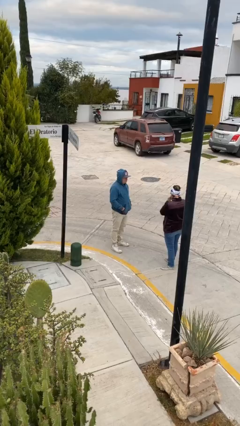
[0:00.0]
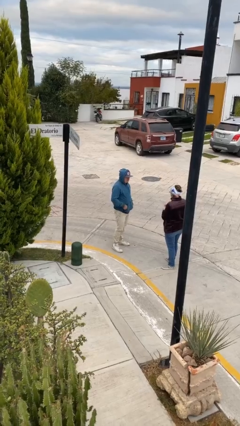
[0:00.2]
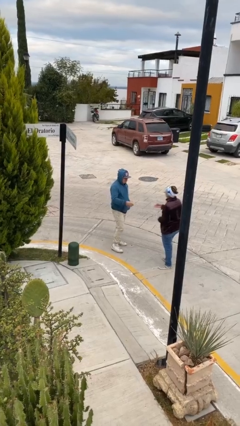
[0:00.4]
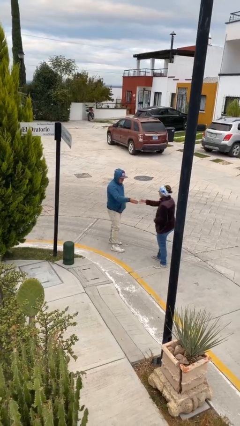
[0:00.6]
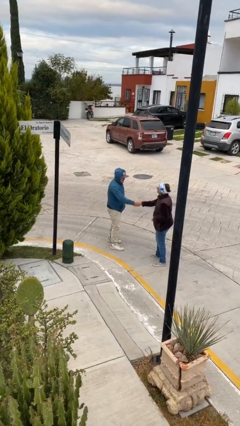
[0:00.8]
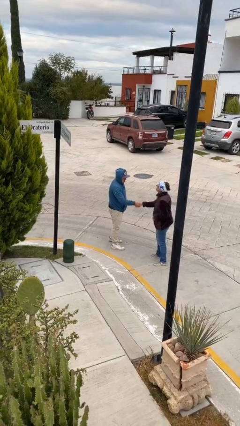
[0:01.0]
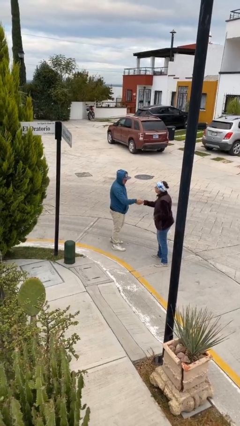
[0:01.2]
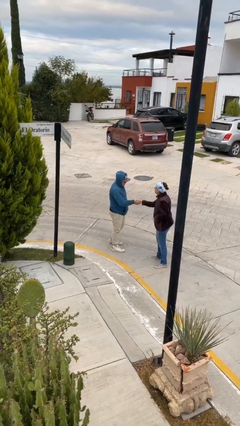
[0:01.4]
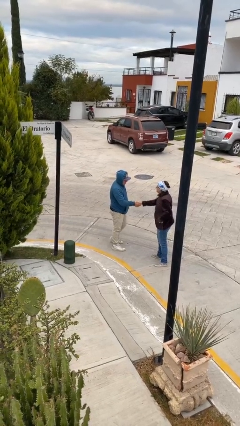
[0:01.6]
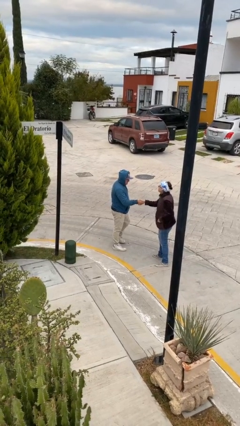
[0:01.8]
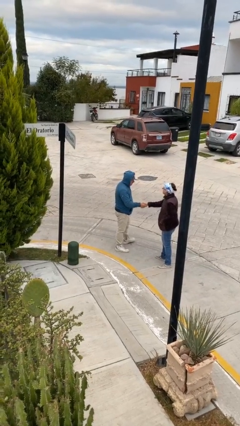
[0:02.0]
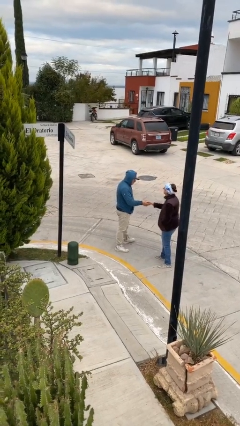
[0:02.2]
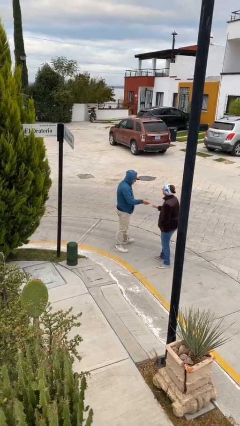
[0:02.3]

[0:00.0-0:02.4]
person shakes hand

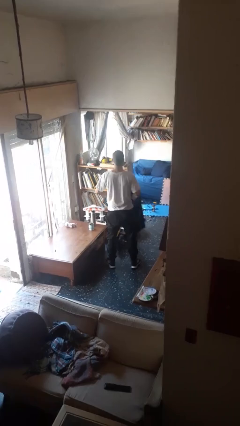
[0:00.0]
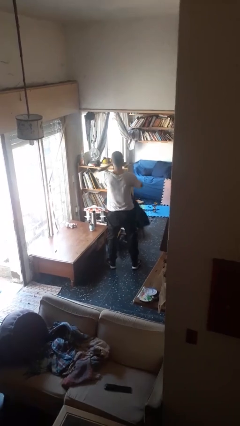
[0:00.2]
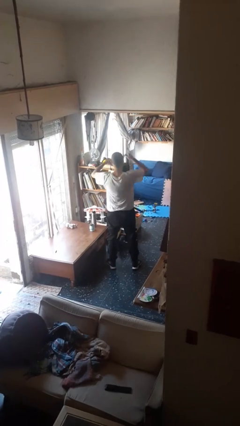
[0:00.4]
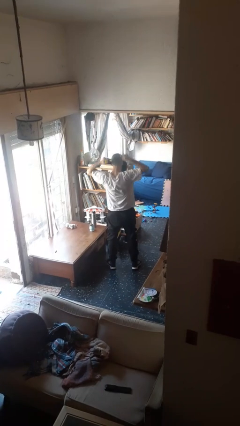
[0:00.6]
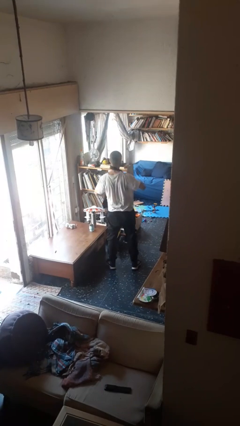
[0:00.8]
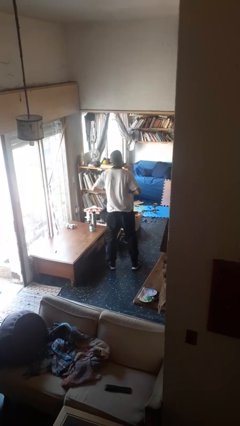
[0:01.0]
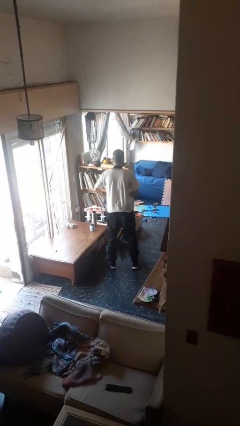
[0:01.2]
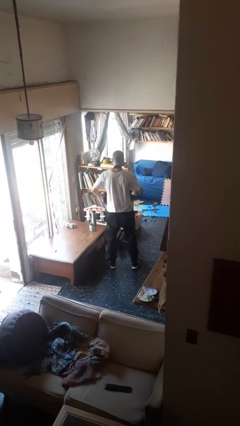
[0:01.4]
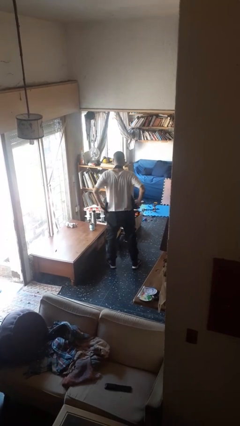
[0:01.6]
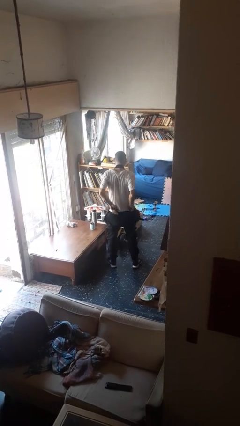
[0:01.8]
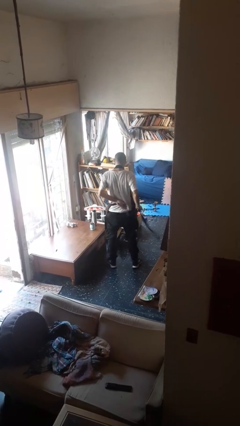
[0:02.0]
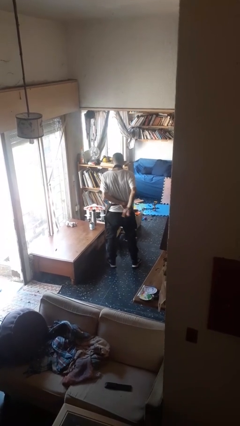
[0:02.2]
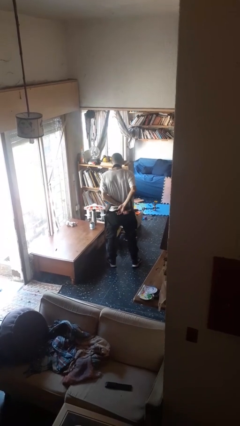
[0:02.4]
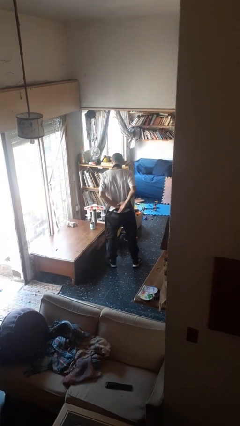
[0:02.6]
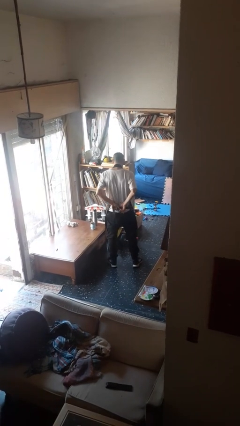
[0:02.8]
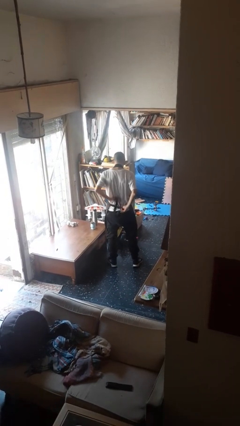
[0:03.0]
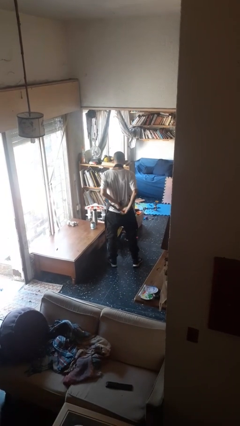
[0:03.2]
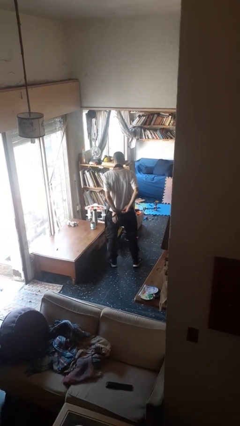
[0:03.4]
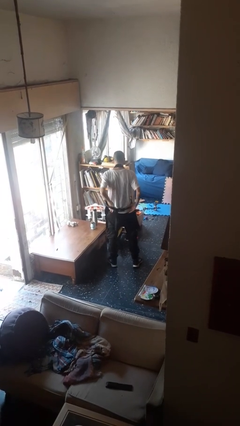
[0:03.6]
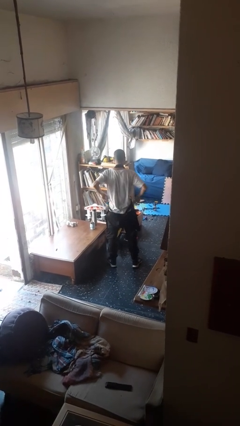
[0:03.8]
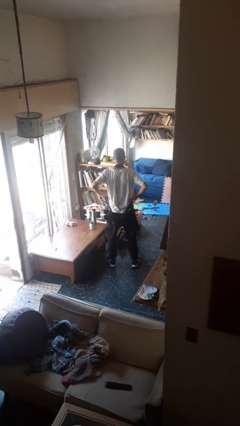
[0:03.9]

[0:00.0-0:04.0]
person puts on apron

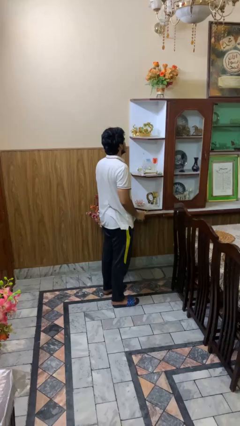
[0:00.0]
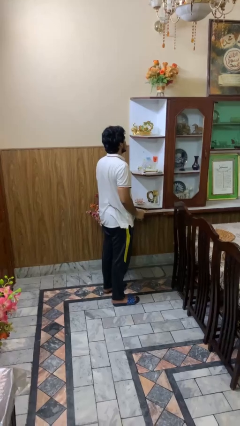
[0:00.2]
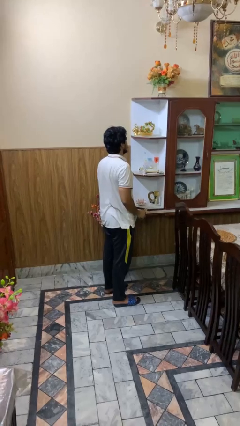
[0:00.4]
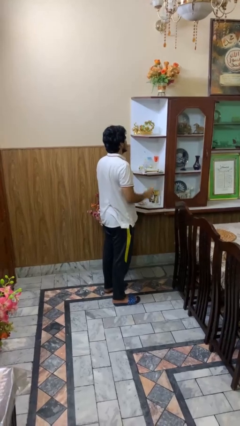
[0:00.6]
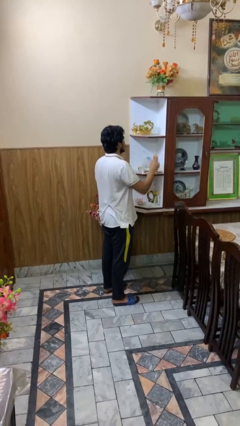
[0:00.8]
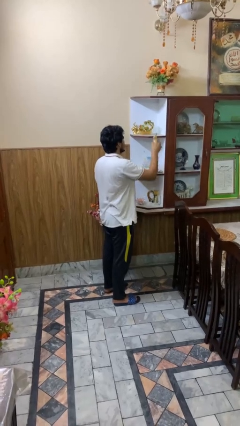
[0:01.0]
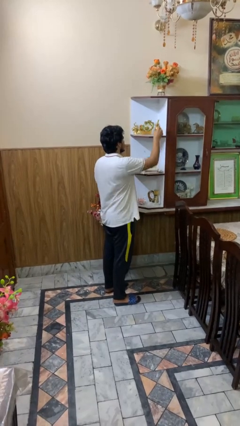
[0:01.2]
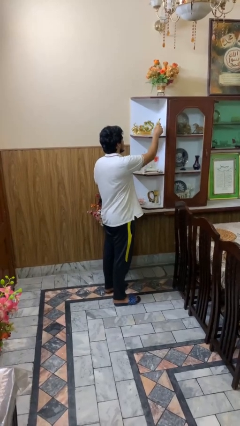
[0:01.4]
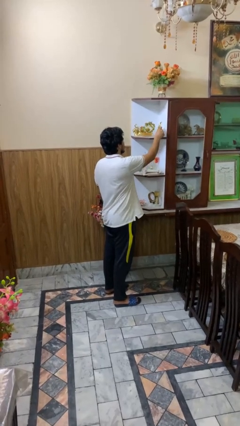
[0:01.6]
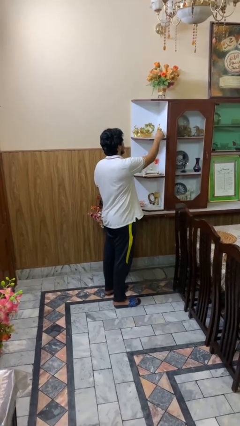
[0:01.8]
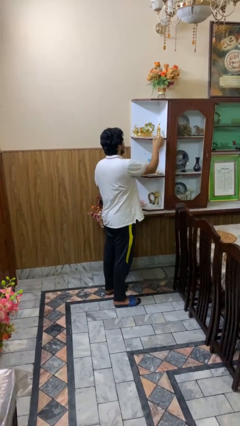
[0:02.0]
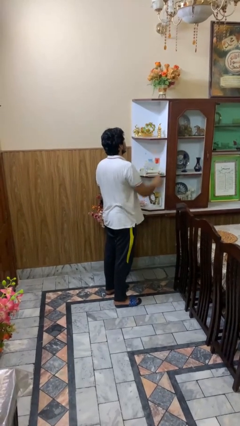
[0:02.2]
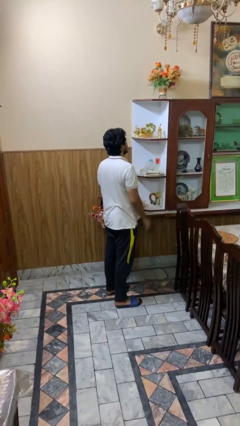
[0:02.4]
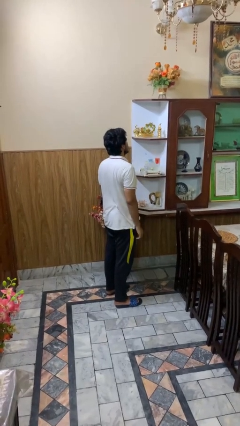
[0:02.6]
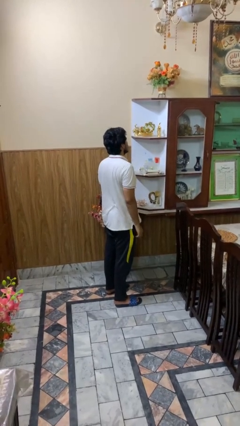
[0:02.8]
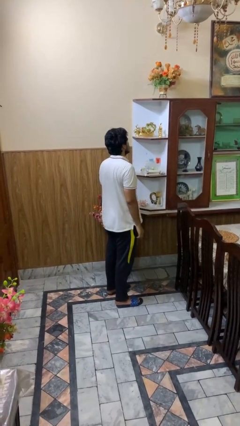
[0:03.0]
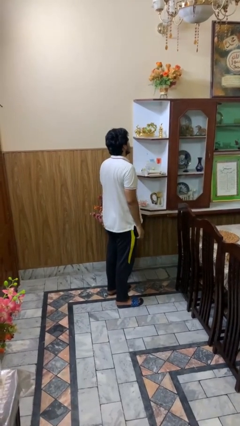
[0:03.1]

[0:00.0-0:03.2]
person puts down object on shelf

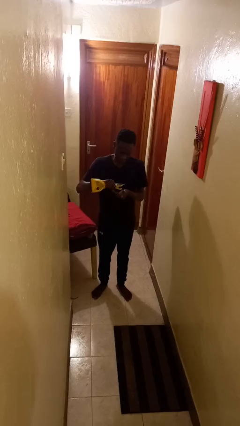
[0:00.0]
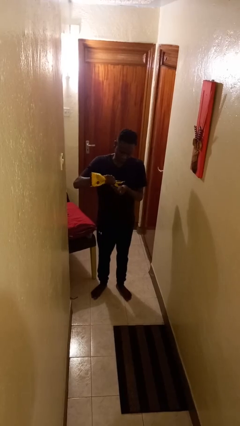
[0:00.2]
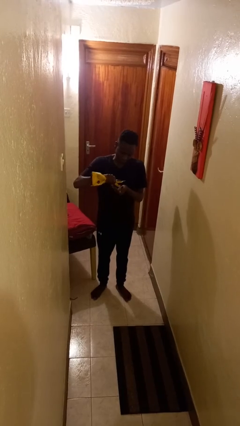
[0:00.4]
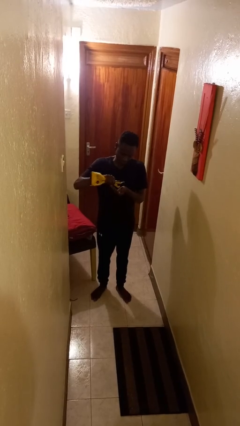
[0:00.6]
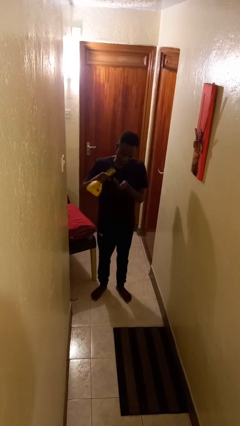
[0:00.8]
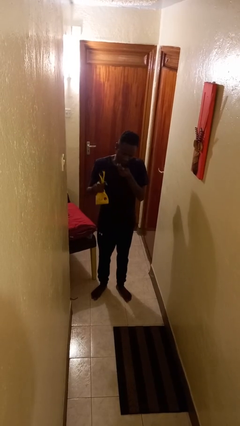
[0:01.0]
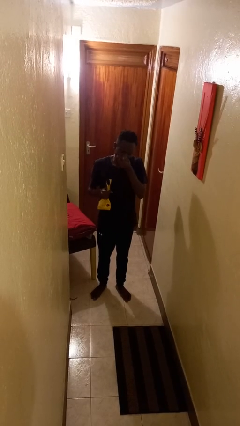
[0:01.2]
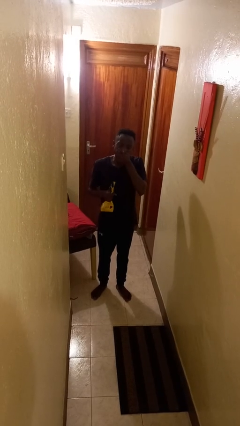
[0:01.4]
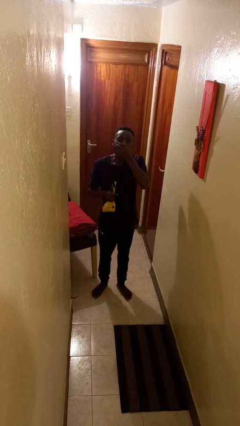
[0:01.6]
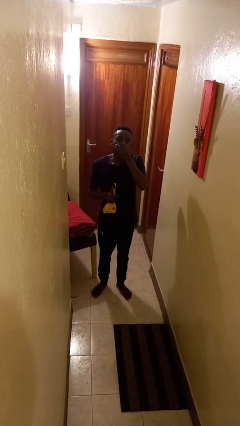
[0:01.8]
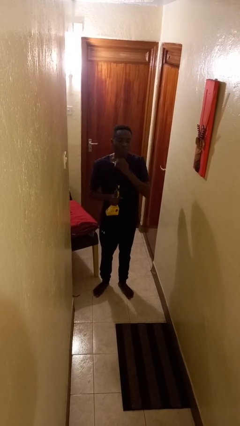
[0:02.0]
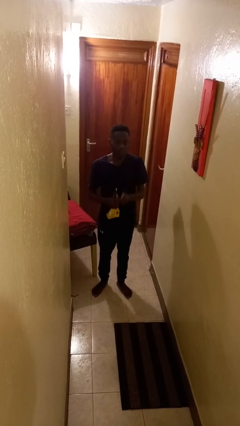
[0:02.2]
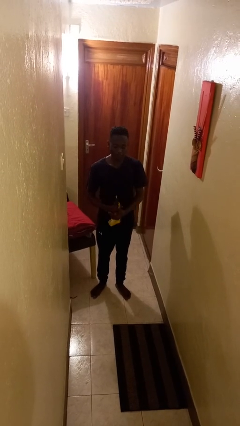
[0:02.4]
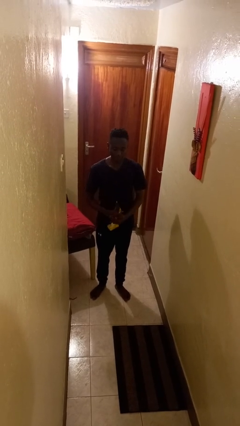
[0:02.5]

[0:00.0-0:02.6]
person eats snack from bag

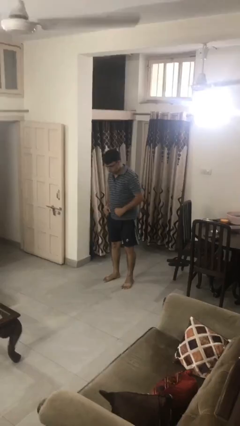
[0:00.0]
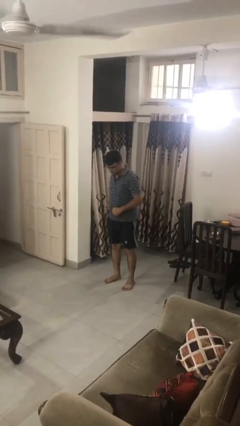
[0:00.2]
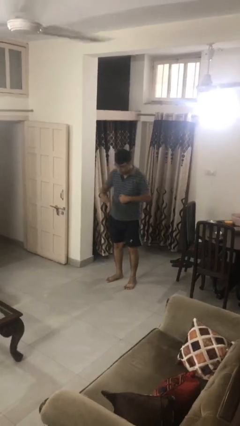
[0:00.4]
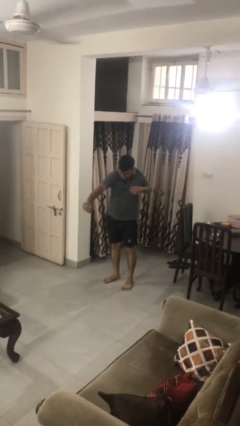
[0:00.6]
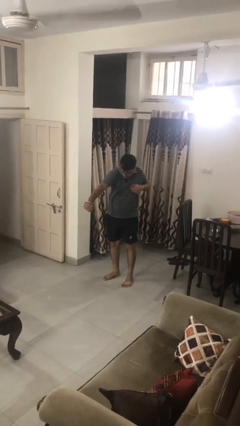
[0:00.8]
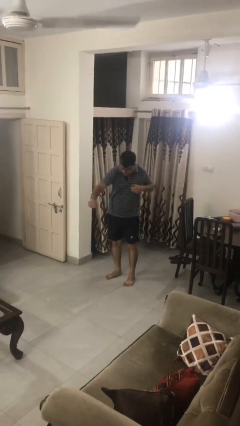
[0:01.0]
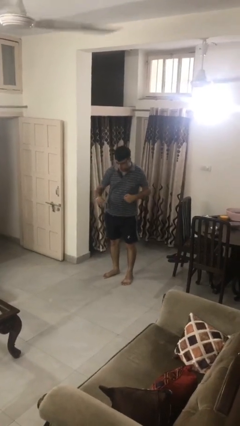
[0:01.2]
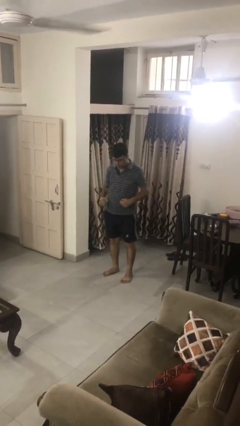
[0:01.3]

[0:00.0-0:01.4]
person karate chop

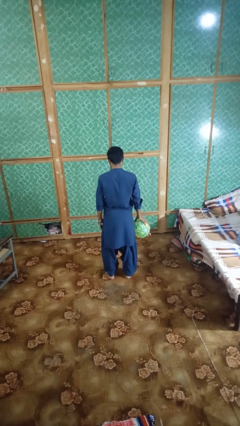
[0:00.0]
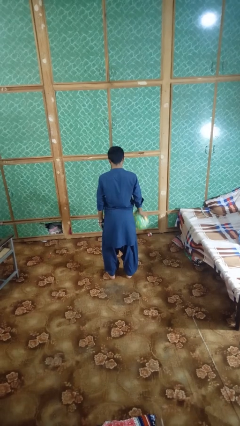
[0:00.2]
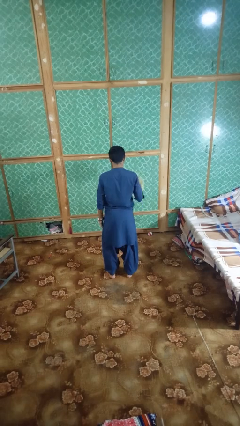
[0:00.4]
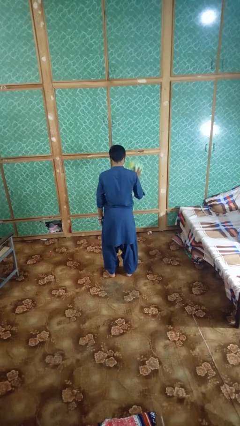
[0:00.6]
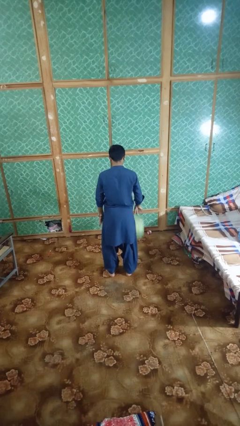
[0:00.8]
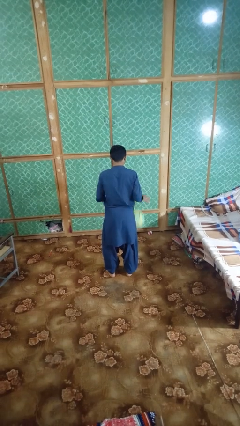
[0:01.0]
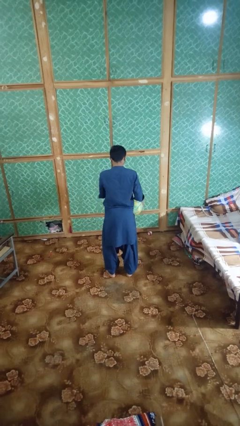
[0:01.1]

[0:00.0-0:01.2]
person bounces ball on floor

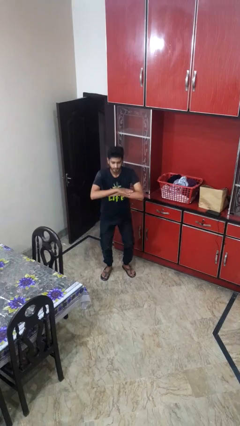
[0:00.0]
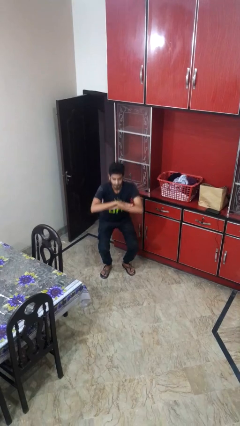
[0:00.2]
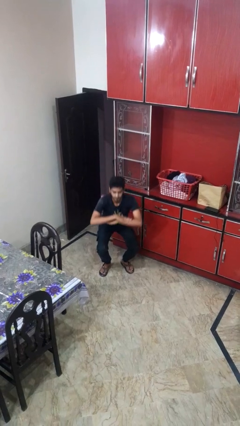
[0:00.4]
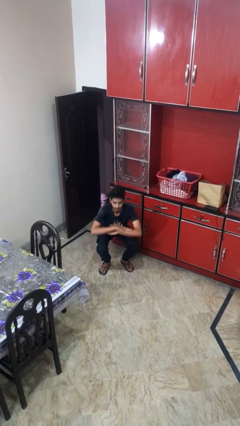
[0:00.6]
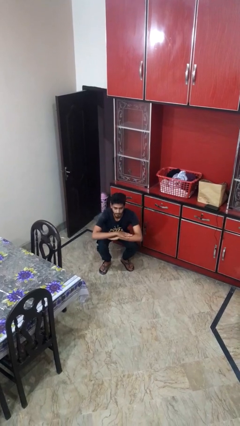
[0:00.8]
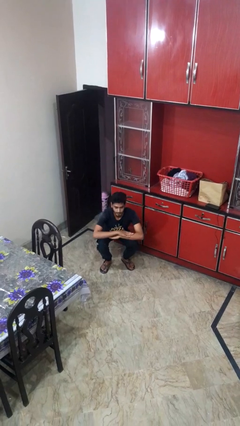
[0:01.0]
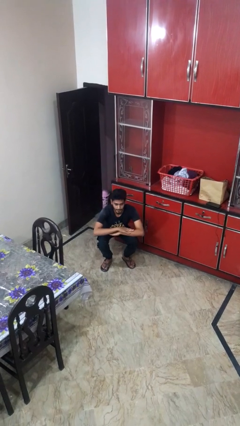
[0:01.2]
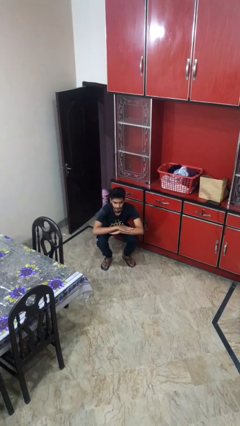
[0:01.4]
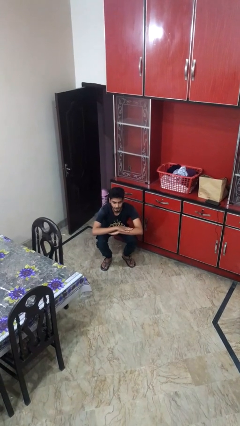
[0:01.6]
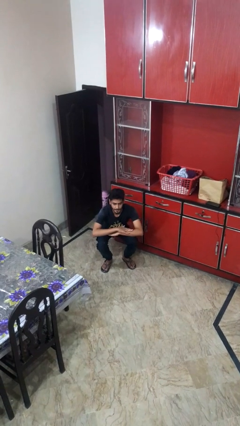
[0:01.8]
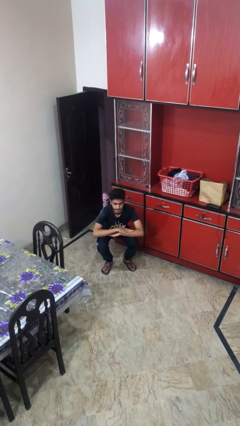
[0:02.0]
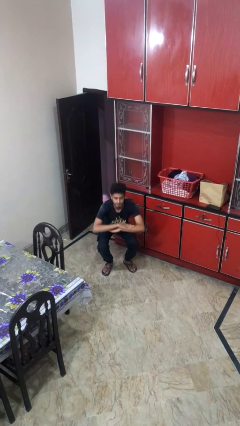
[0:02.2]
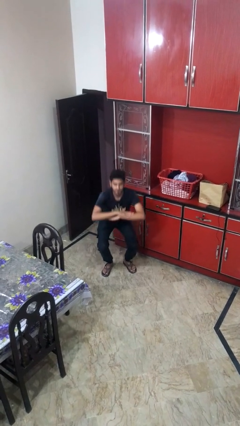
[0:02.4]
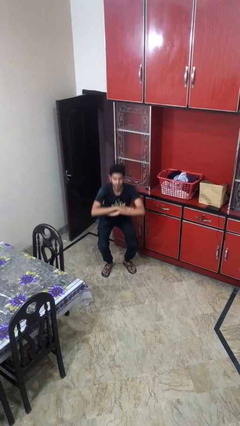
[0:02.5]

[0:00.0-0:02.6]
person squats
